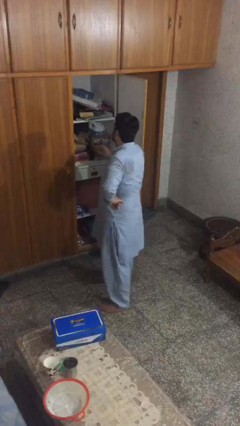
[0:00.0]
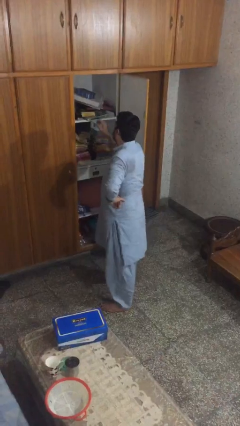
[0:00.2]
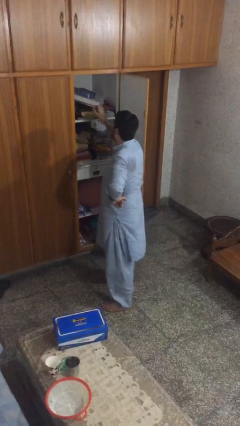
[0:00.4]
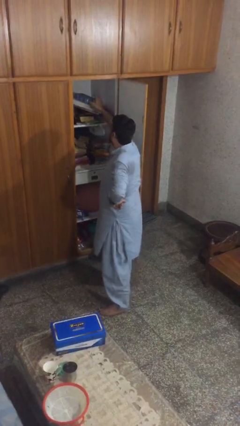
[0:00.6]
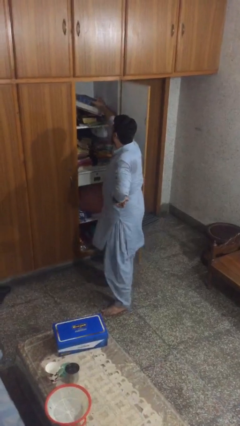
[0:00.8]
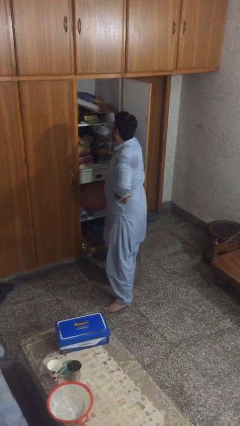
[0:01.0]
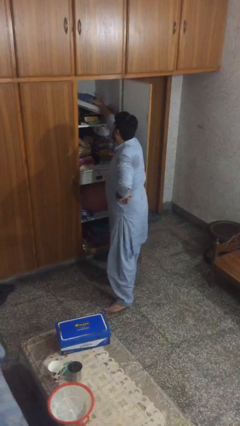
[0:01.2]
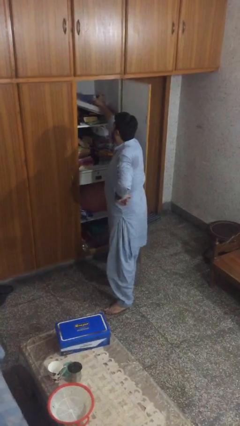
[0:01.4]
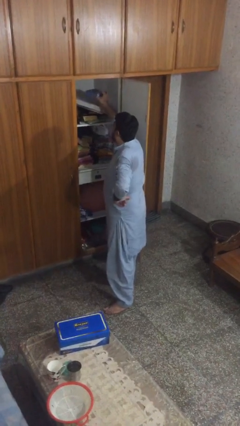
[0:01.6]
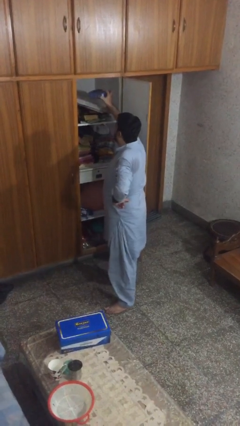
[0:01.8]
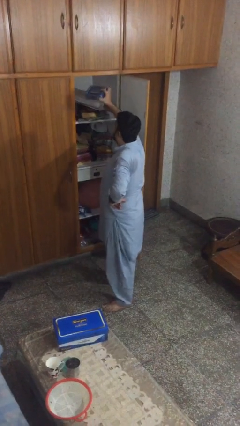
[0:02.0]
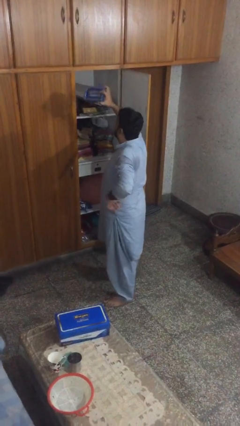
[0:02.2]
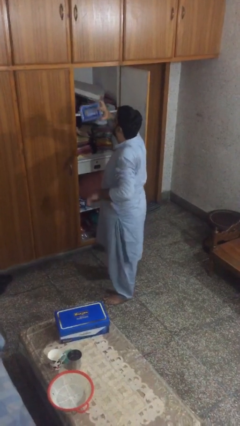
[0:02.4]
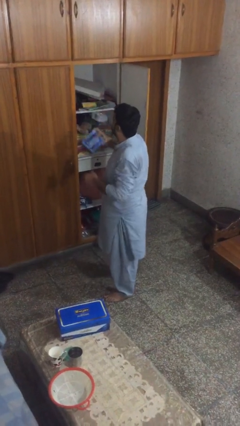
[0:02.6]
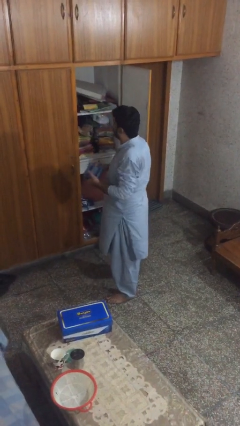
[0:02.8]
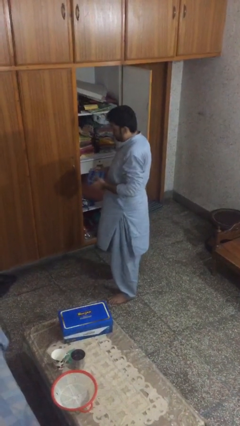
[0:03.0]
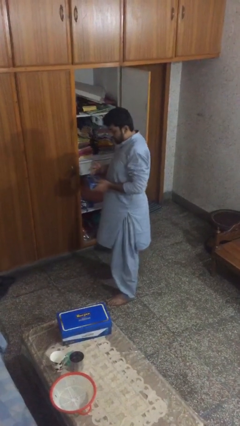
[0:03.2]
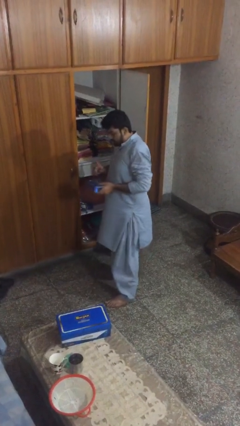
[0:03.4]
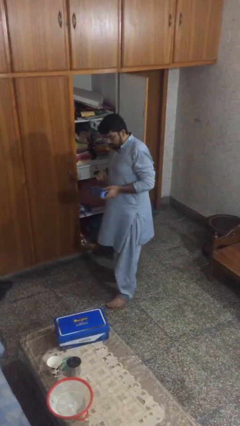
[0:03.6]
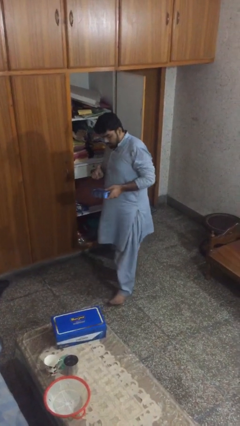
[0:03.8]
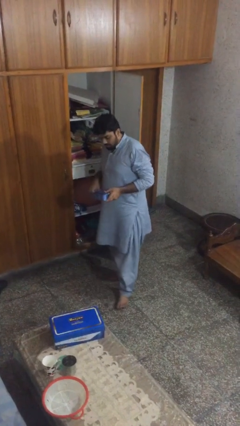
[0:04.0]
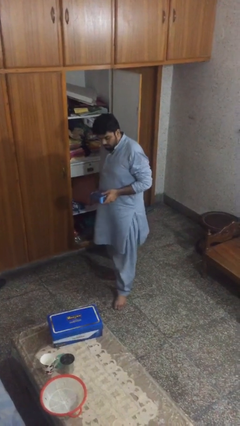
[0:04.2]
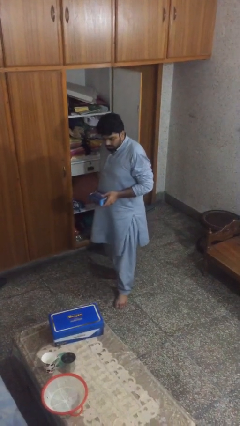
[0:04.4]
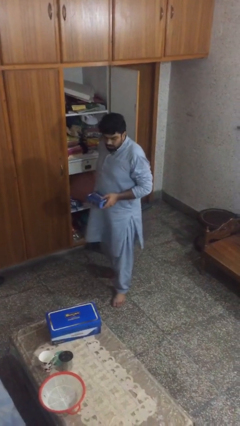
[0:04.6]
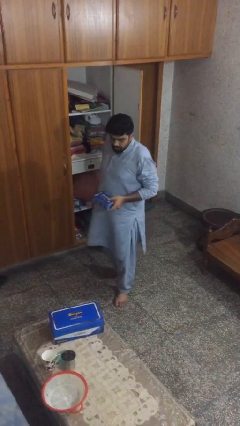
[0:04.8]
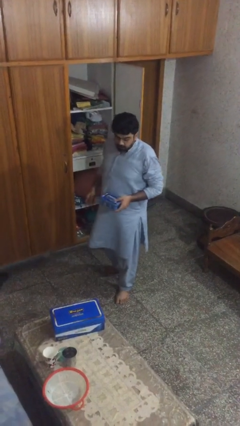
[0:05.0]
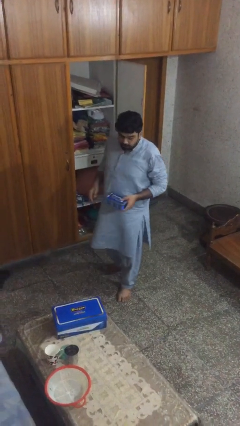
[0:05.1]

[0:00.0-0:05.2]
person picks up object from shelf

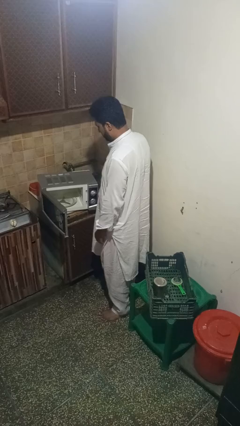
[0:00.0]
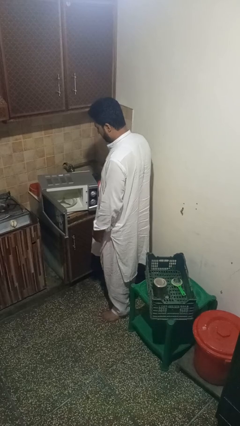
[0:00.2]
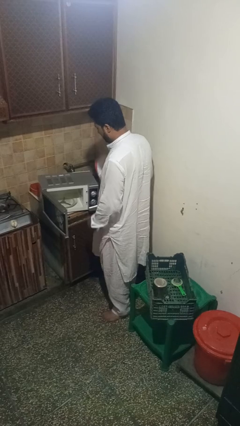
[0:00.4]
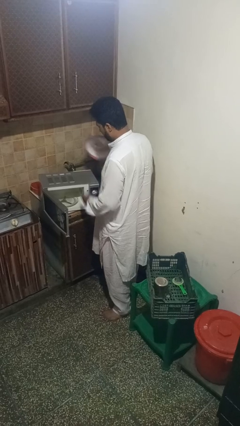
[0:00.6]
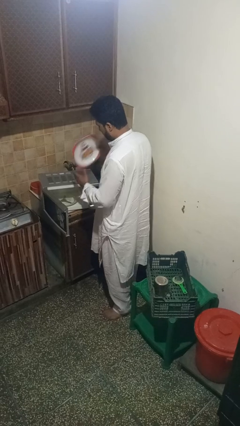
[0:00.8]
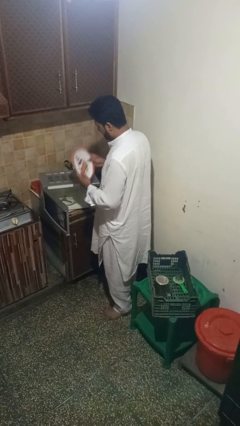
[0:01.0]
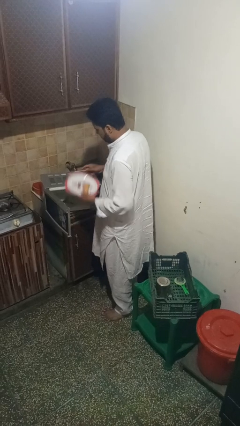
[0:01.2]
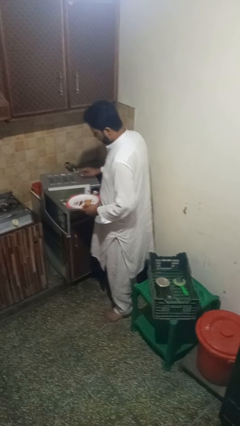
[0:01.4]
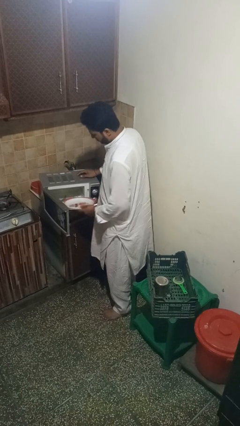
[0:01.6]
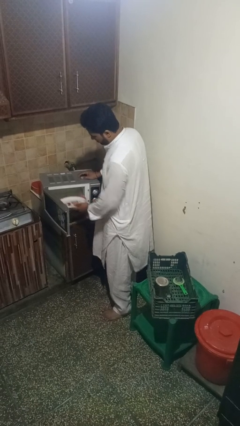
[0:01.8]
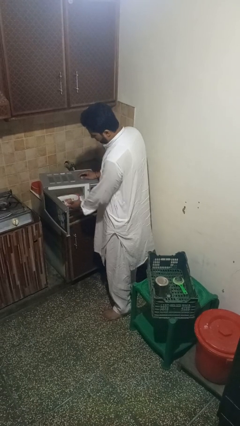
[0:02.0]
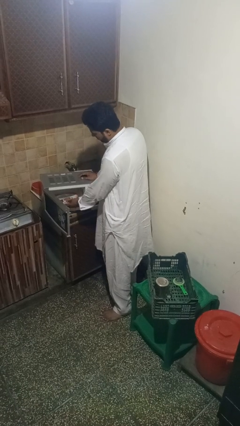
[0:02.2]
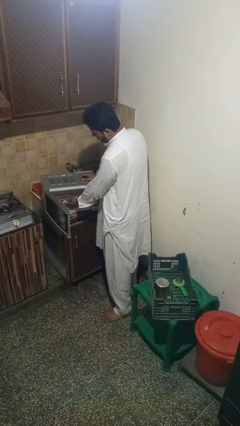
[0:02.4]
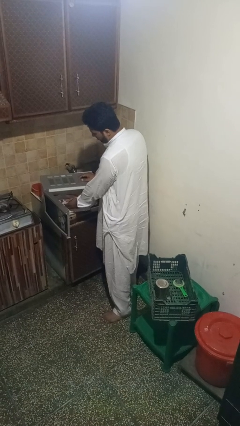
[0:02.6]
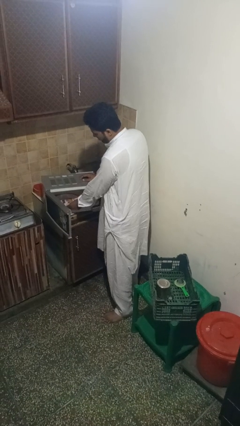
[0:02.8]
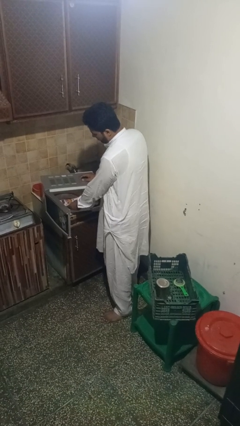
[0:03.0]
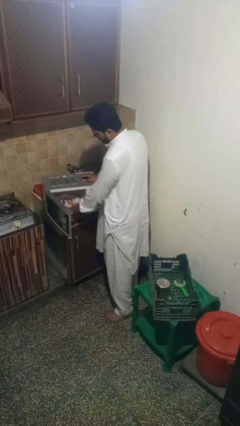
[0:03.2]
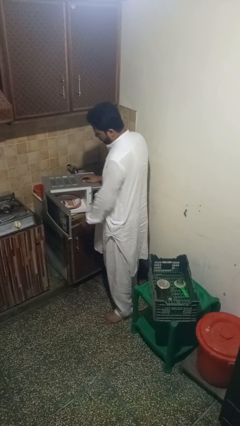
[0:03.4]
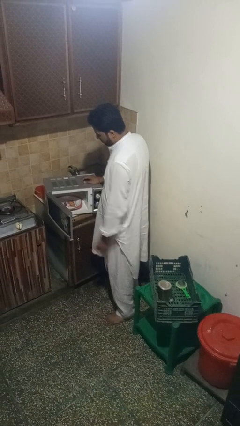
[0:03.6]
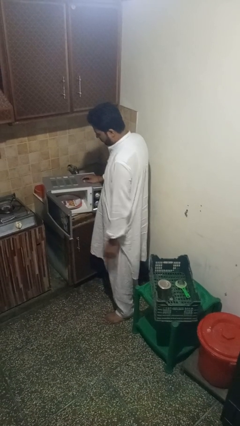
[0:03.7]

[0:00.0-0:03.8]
person puts object into microwave

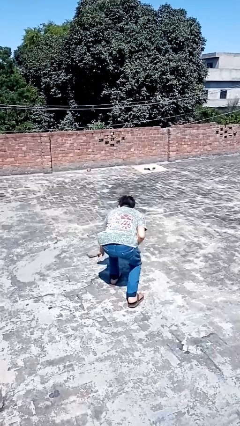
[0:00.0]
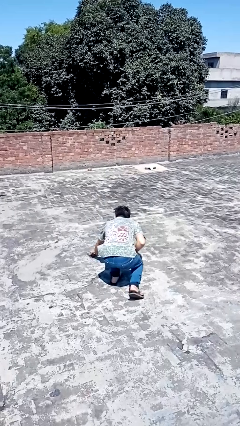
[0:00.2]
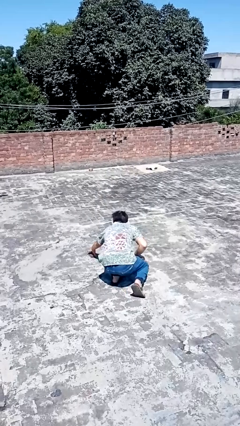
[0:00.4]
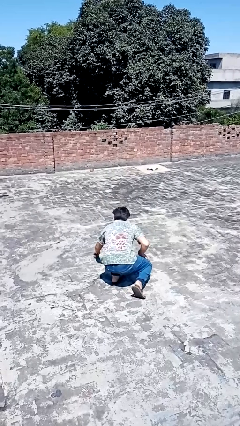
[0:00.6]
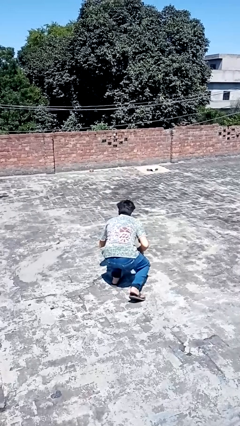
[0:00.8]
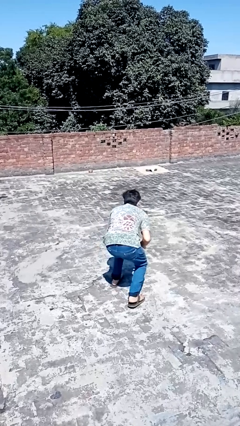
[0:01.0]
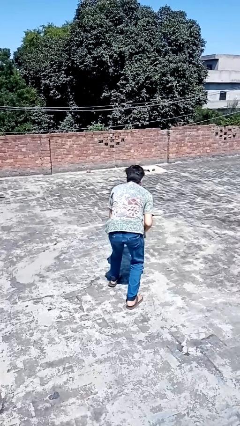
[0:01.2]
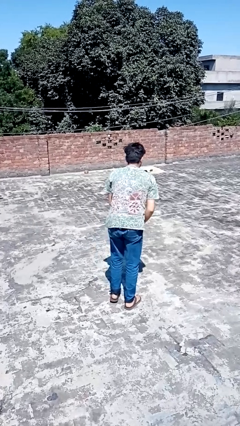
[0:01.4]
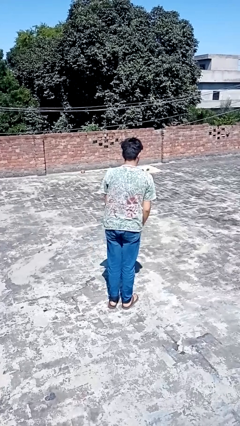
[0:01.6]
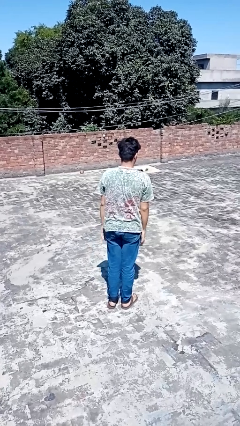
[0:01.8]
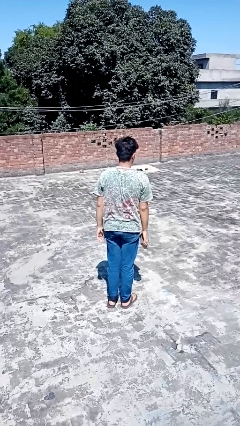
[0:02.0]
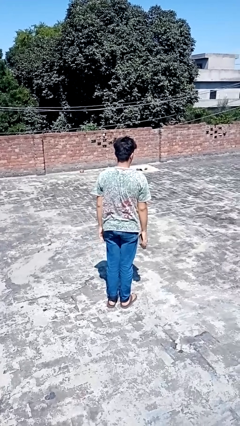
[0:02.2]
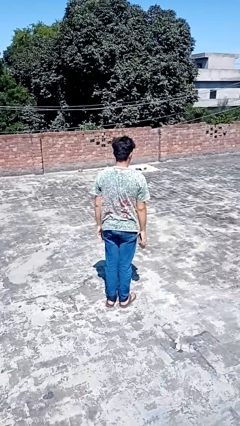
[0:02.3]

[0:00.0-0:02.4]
person picks up object from floor

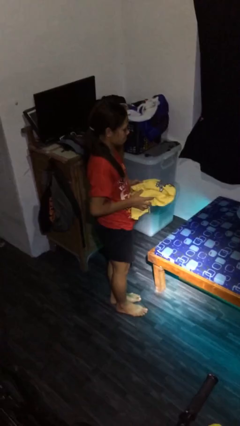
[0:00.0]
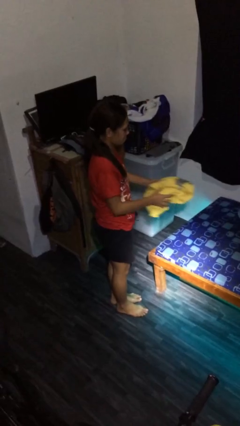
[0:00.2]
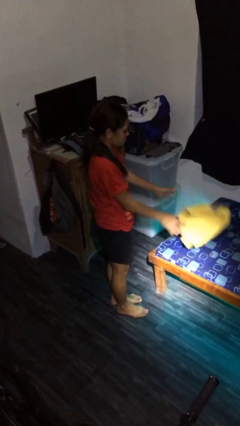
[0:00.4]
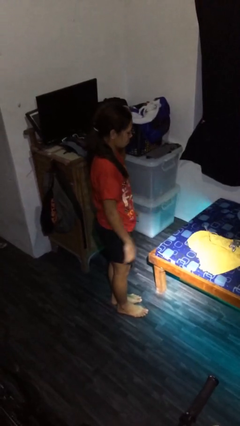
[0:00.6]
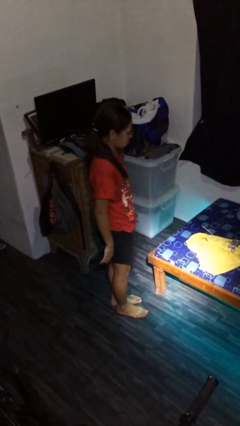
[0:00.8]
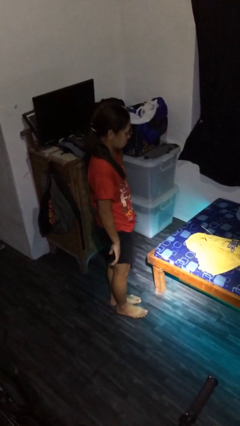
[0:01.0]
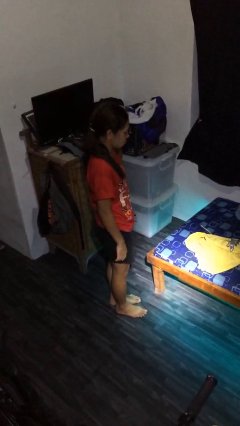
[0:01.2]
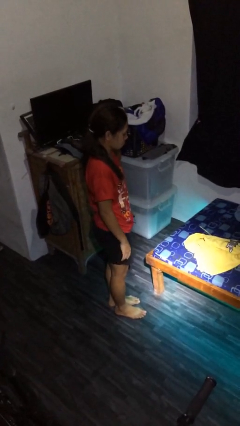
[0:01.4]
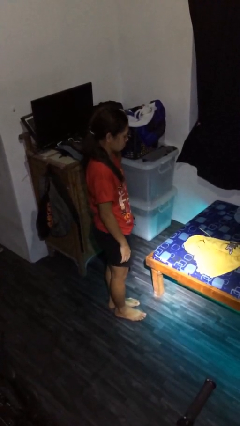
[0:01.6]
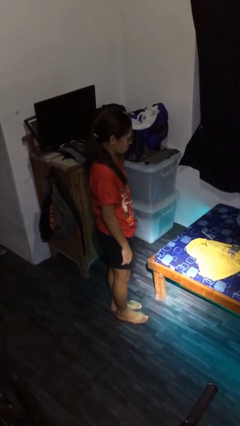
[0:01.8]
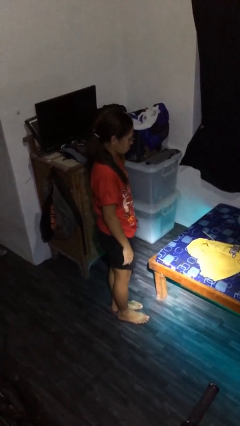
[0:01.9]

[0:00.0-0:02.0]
person throws object on bed

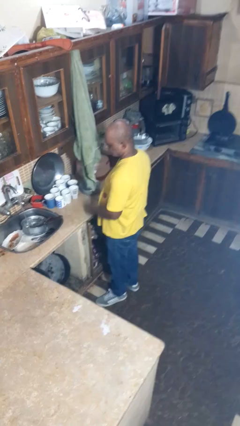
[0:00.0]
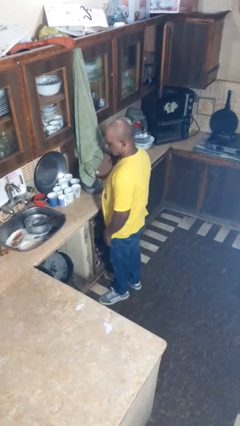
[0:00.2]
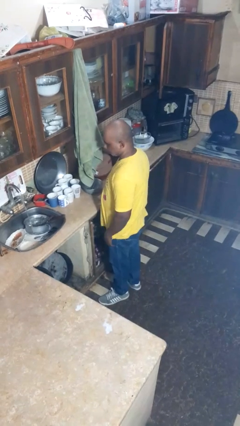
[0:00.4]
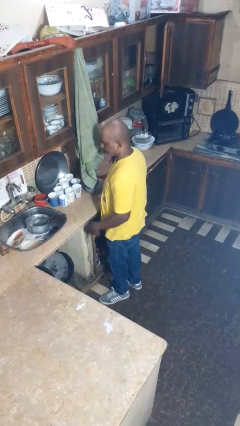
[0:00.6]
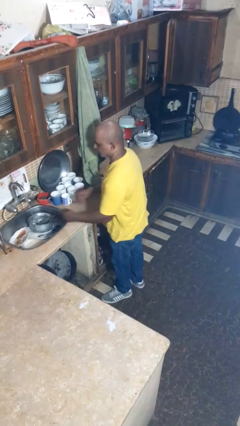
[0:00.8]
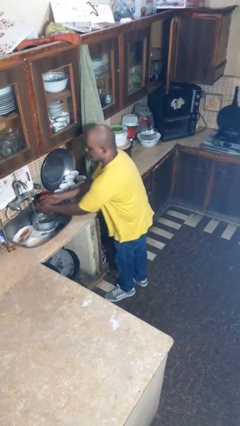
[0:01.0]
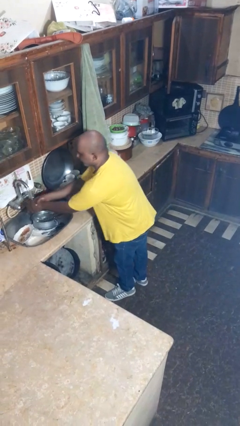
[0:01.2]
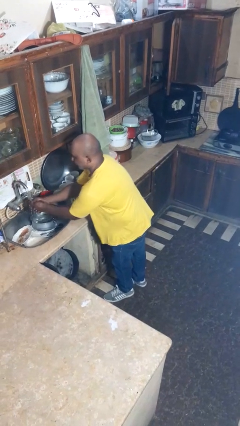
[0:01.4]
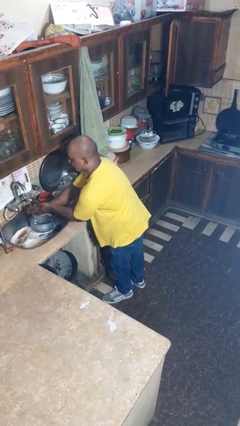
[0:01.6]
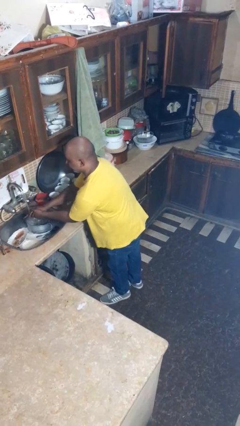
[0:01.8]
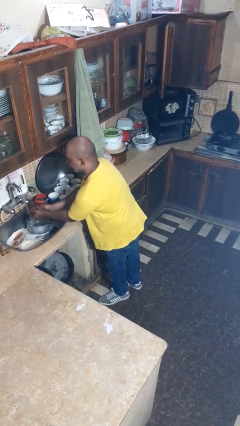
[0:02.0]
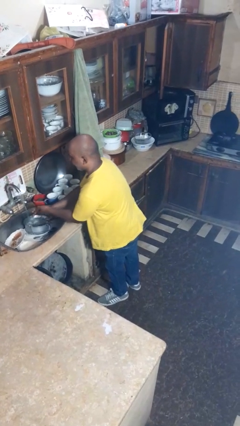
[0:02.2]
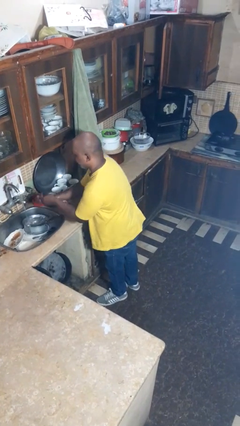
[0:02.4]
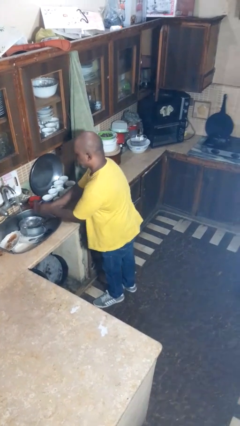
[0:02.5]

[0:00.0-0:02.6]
person washes hands

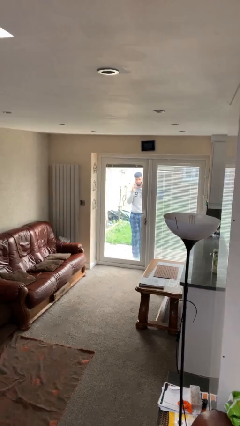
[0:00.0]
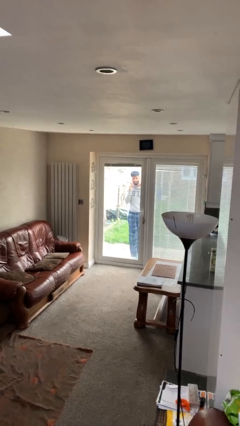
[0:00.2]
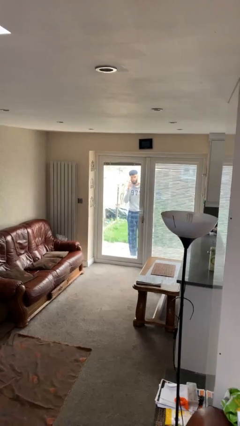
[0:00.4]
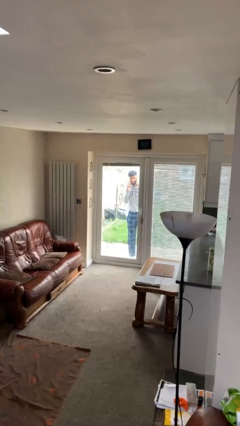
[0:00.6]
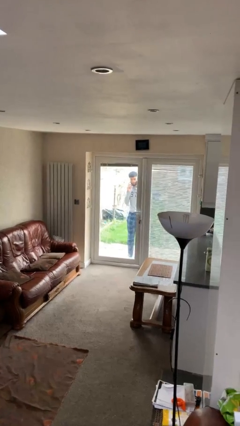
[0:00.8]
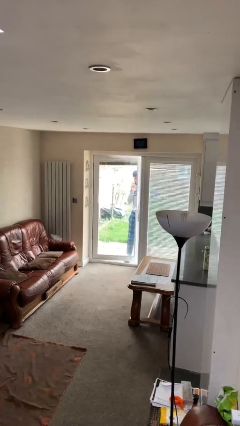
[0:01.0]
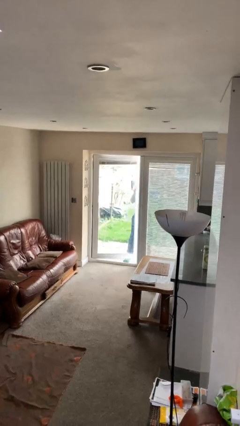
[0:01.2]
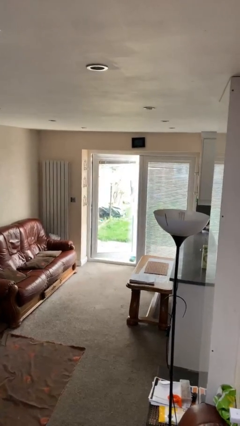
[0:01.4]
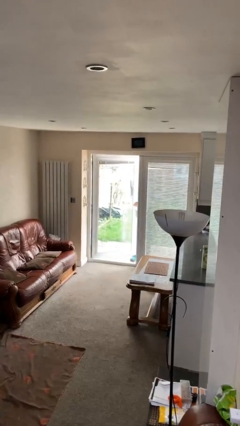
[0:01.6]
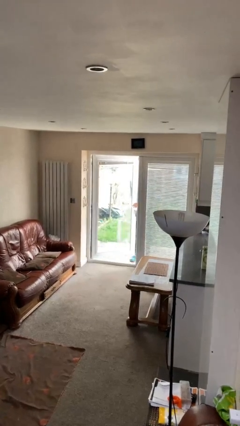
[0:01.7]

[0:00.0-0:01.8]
person opens facility door

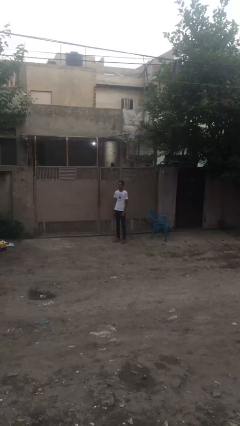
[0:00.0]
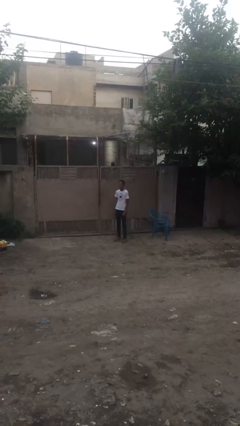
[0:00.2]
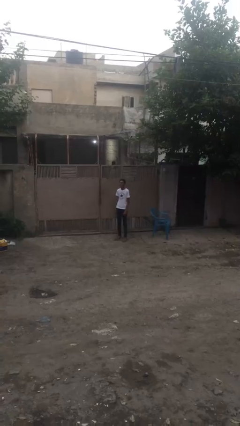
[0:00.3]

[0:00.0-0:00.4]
person texts on phone
